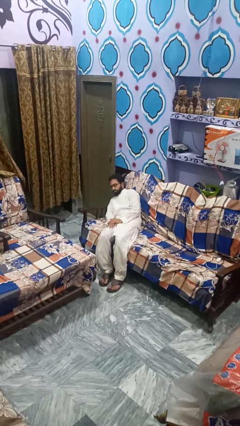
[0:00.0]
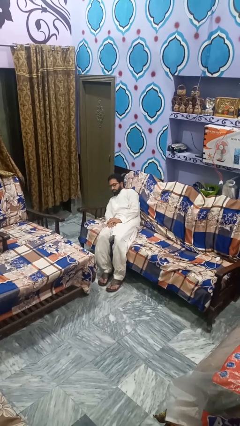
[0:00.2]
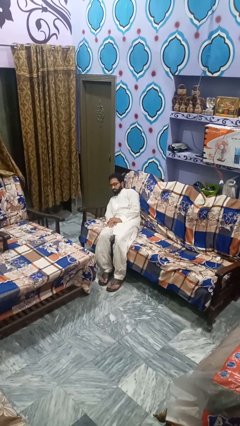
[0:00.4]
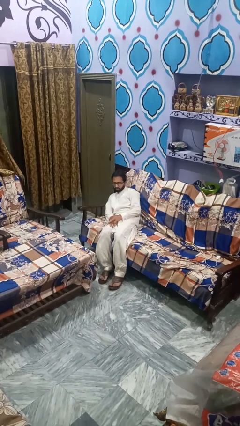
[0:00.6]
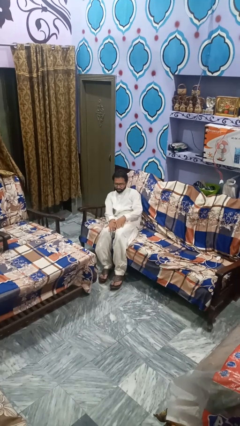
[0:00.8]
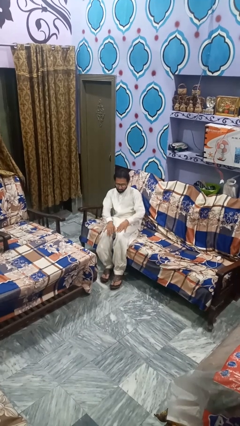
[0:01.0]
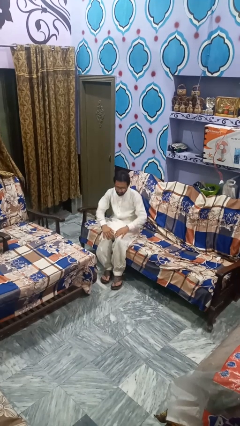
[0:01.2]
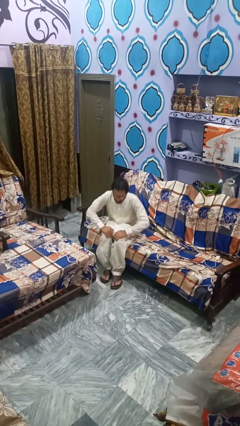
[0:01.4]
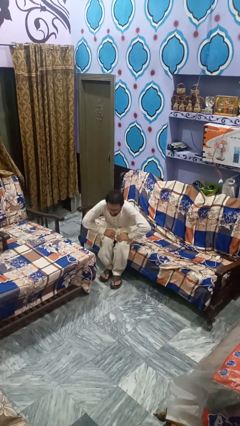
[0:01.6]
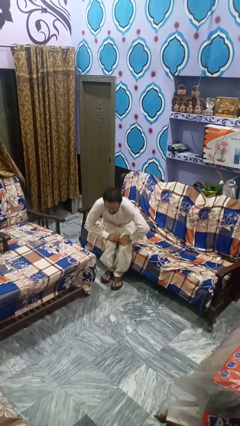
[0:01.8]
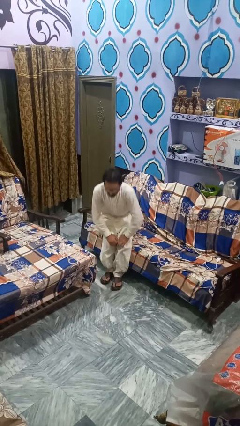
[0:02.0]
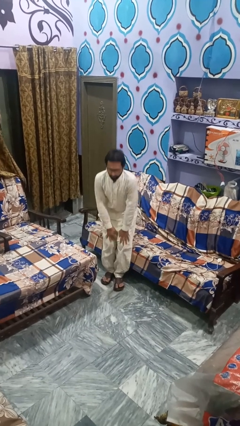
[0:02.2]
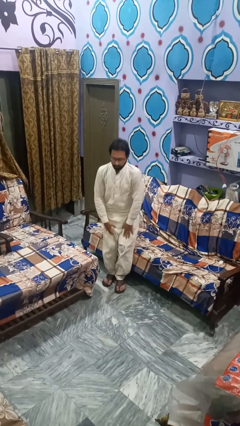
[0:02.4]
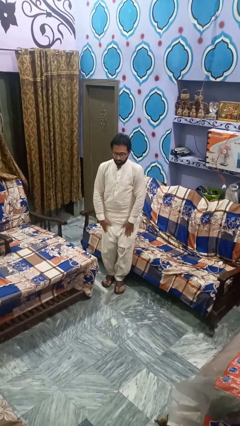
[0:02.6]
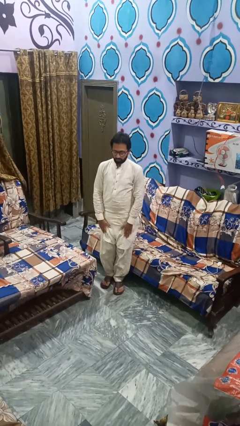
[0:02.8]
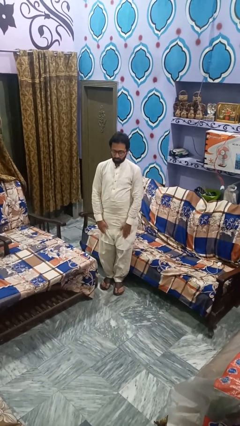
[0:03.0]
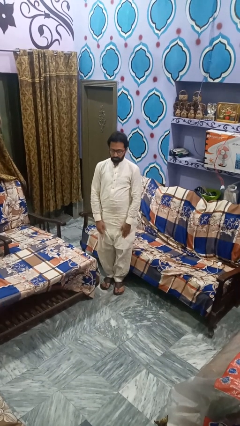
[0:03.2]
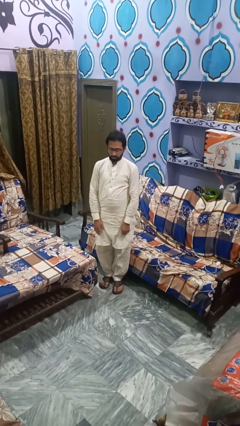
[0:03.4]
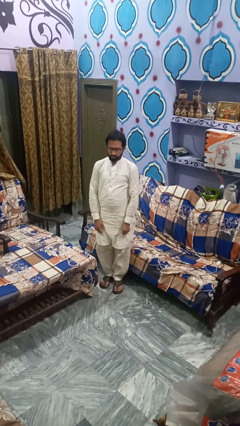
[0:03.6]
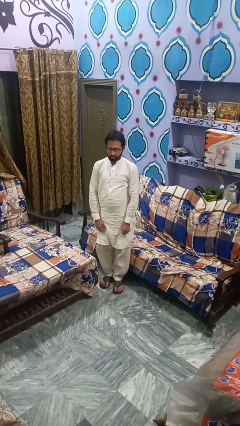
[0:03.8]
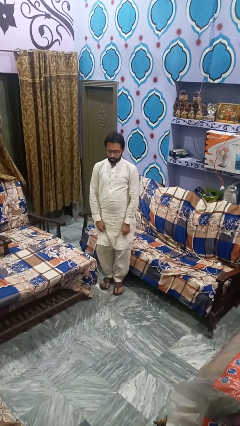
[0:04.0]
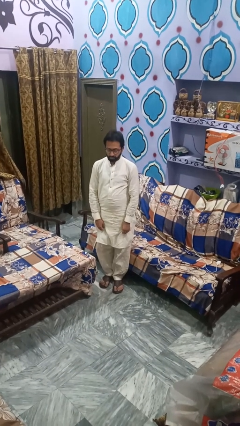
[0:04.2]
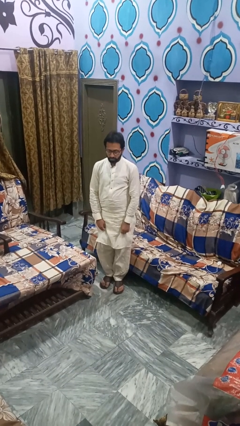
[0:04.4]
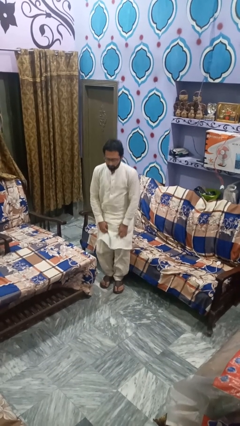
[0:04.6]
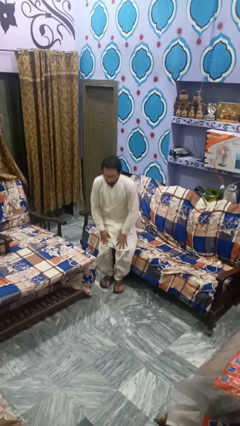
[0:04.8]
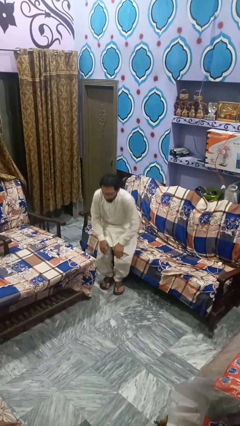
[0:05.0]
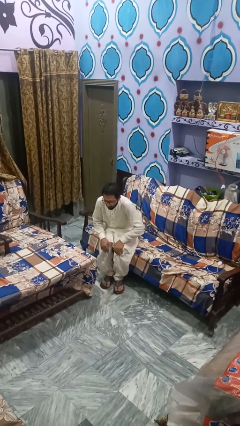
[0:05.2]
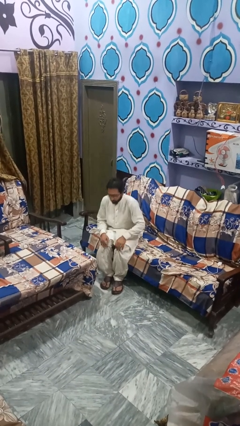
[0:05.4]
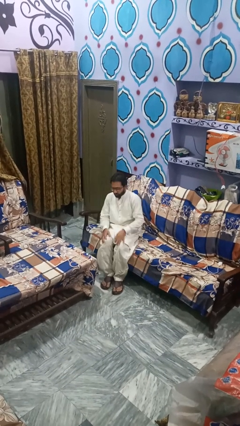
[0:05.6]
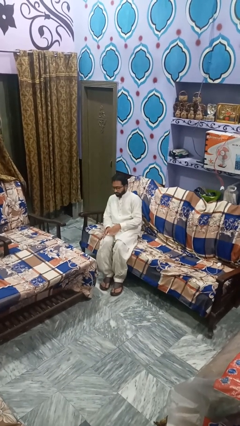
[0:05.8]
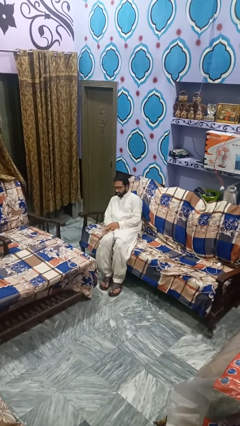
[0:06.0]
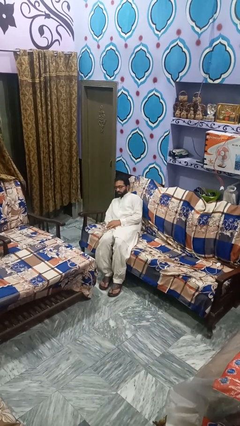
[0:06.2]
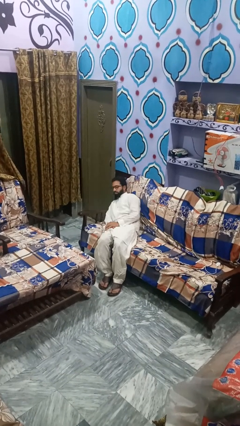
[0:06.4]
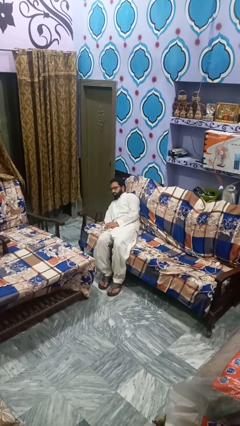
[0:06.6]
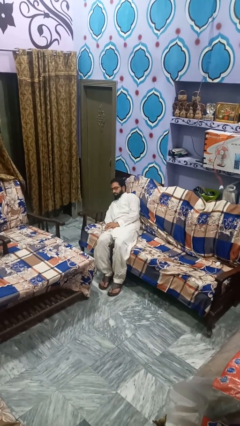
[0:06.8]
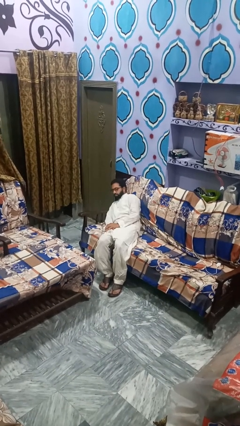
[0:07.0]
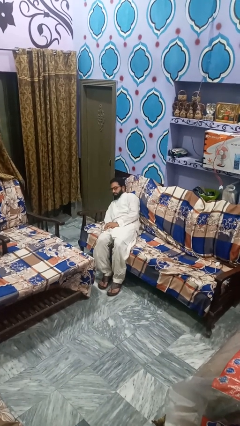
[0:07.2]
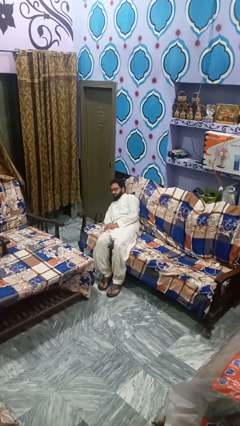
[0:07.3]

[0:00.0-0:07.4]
person stands up

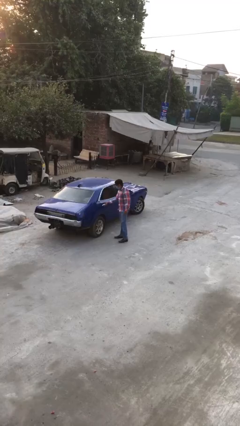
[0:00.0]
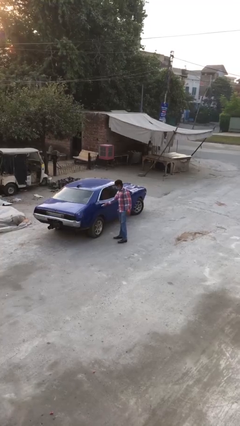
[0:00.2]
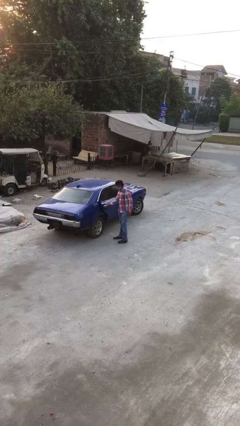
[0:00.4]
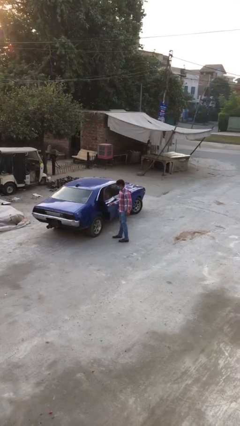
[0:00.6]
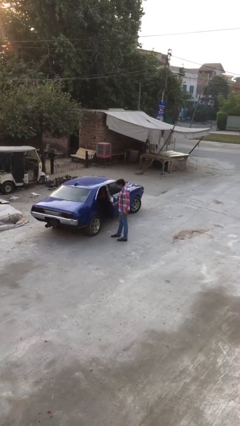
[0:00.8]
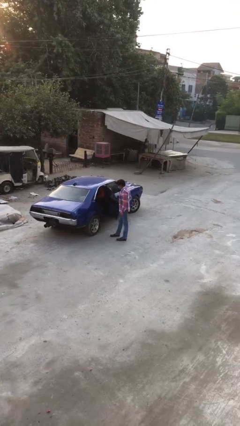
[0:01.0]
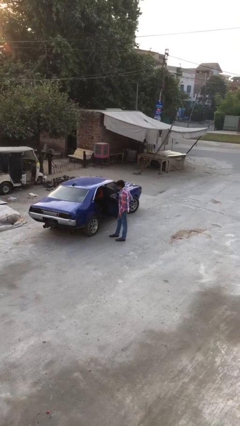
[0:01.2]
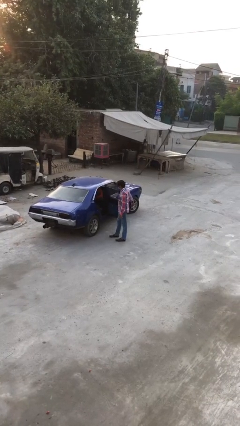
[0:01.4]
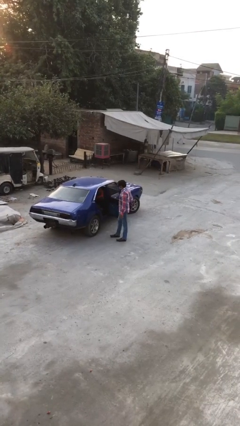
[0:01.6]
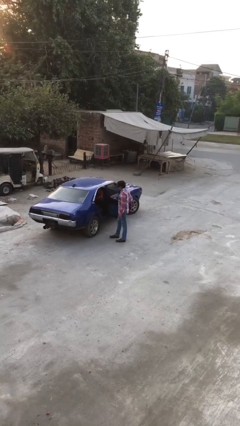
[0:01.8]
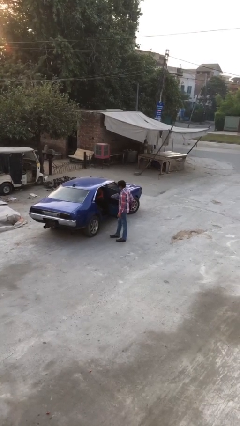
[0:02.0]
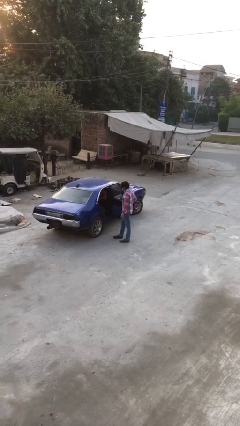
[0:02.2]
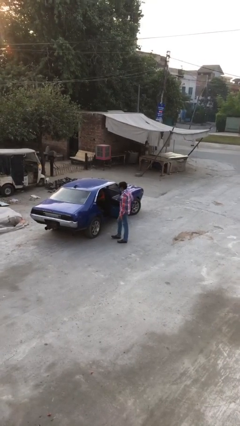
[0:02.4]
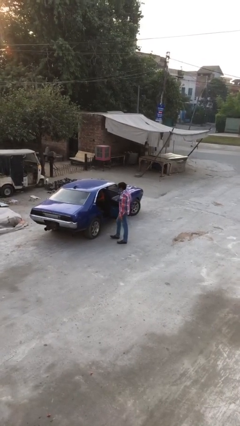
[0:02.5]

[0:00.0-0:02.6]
person opens car door

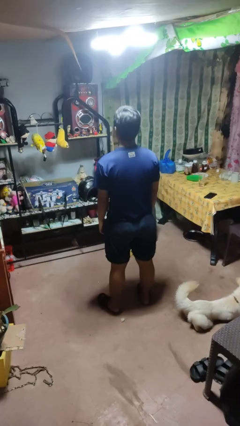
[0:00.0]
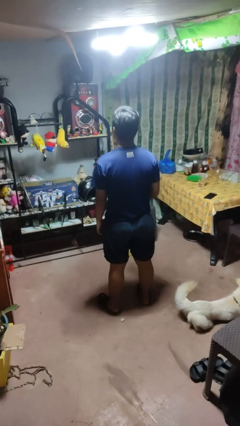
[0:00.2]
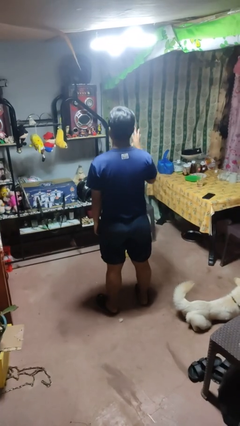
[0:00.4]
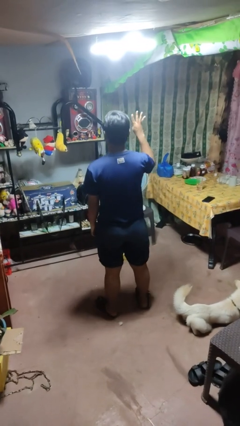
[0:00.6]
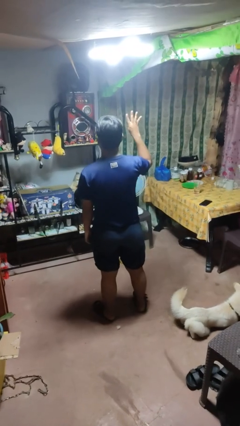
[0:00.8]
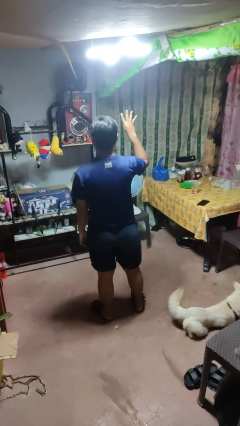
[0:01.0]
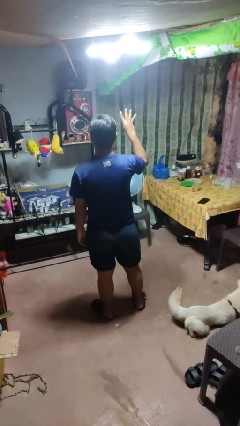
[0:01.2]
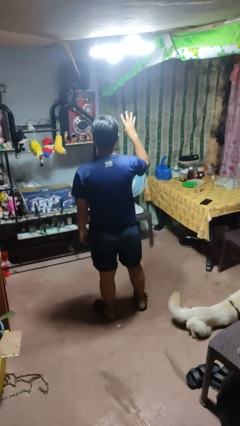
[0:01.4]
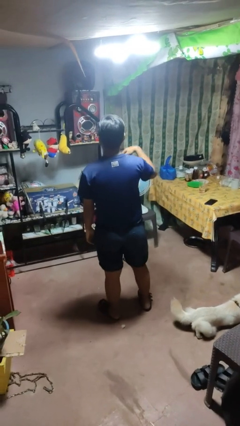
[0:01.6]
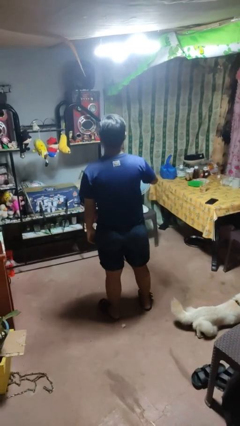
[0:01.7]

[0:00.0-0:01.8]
person gestures number four

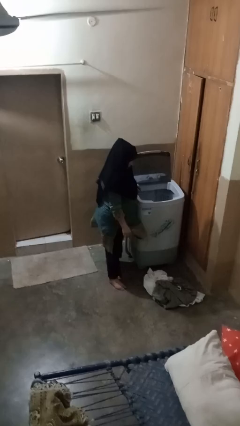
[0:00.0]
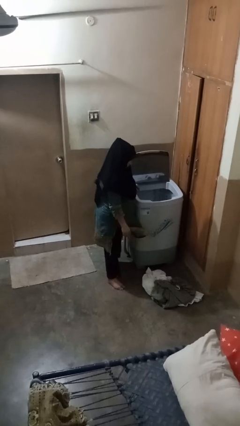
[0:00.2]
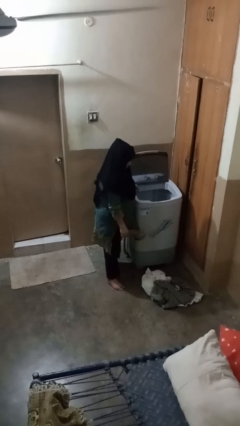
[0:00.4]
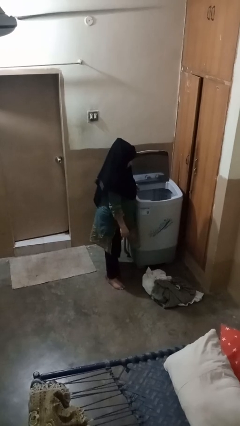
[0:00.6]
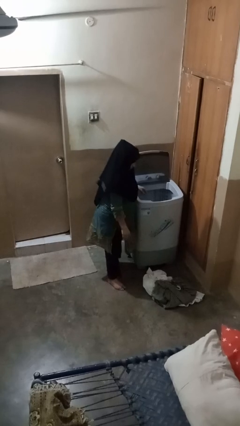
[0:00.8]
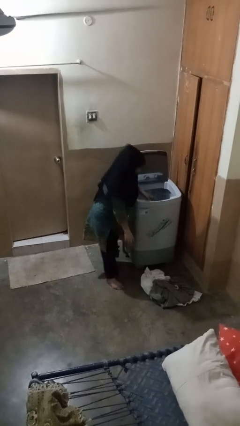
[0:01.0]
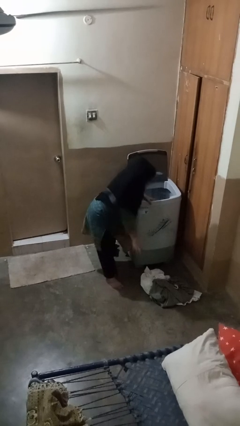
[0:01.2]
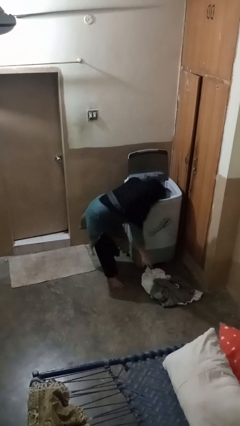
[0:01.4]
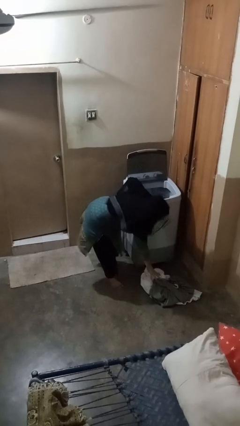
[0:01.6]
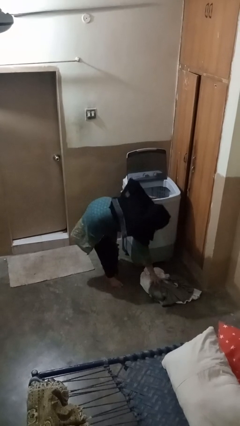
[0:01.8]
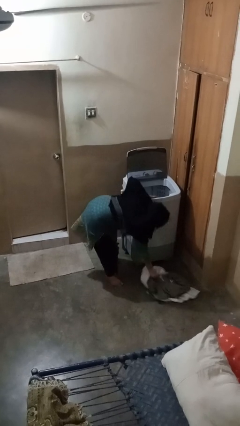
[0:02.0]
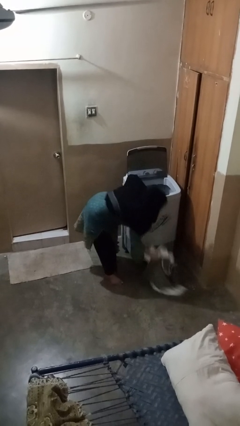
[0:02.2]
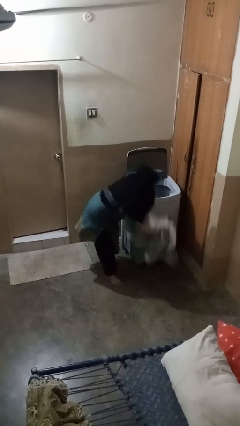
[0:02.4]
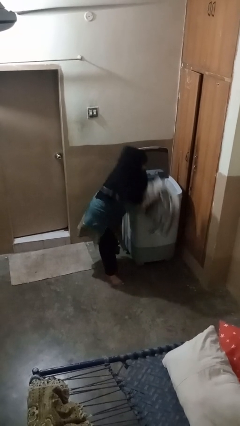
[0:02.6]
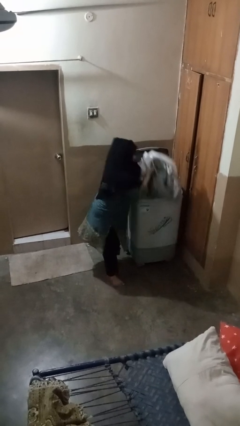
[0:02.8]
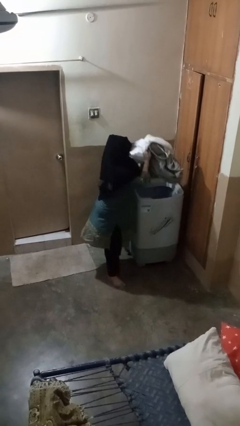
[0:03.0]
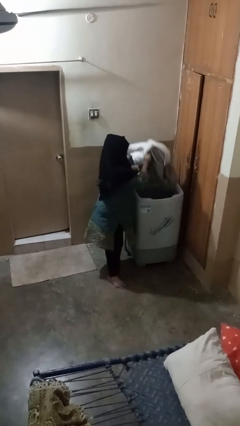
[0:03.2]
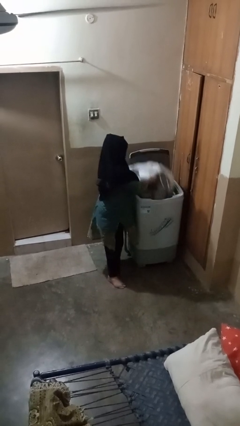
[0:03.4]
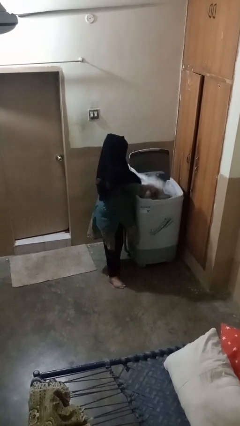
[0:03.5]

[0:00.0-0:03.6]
person loads clotheswasher

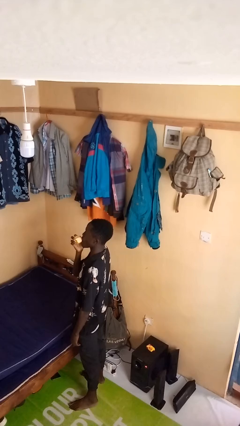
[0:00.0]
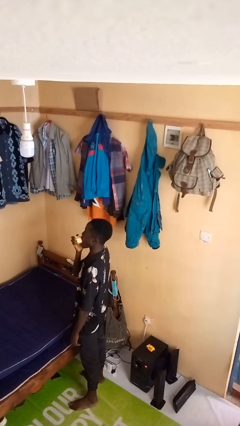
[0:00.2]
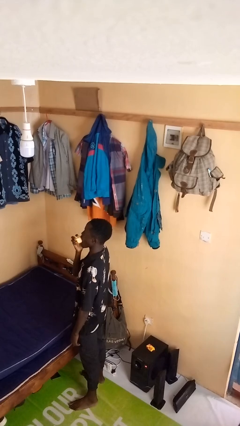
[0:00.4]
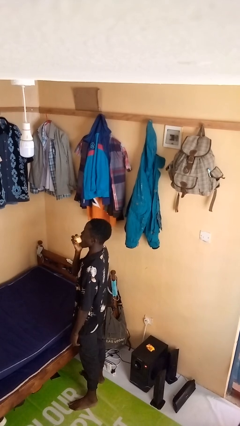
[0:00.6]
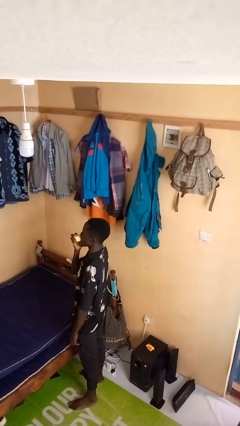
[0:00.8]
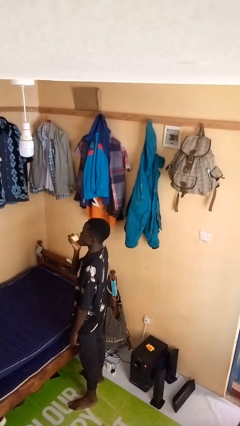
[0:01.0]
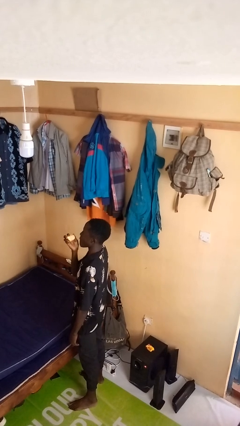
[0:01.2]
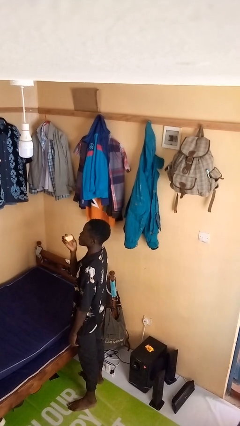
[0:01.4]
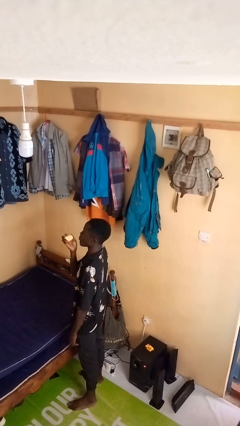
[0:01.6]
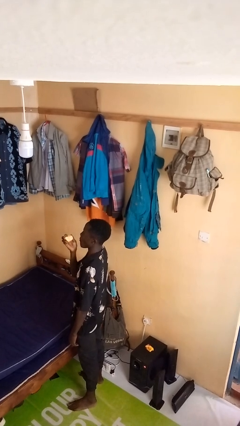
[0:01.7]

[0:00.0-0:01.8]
person eats apple

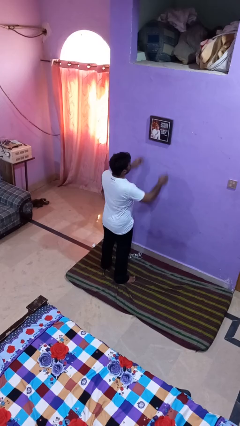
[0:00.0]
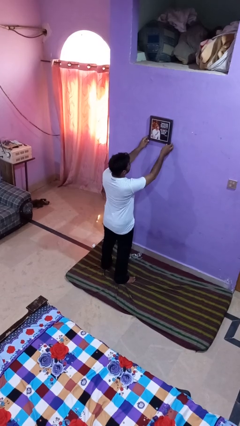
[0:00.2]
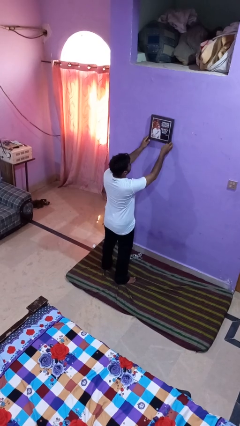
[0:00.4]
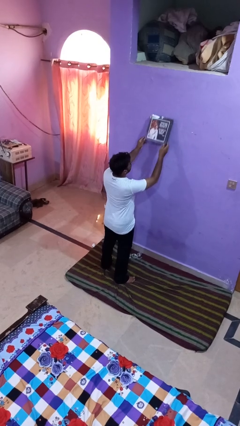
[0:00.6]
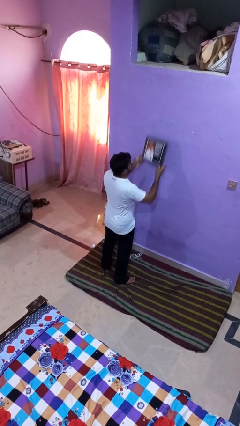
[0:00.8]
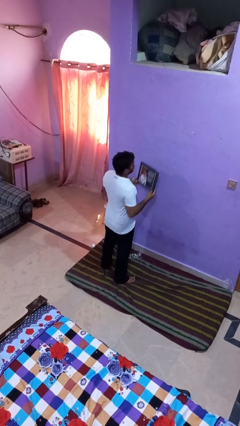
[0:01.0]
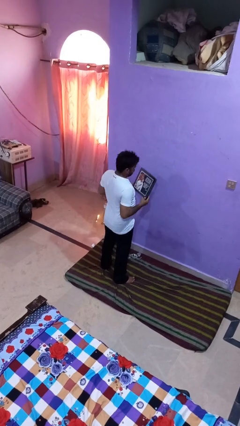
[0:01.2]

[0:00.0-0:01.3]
person puts up picture frame
